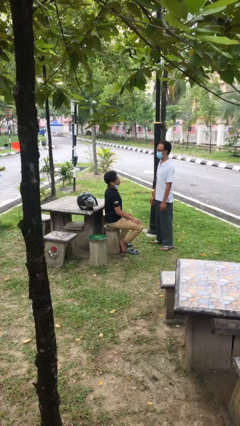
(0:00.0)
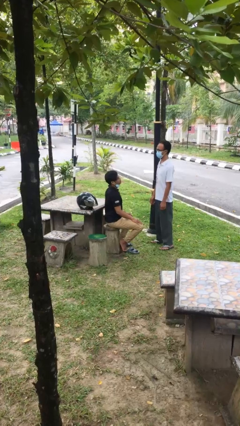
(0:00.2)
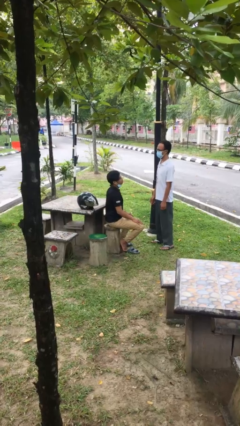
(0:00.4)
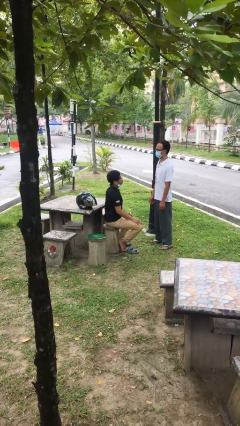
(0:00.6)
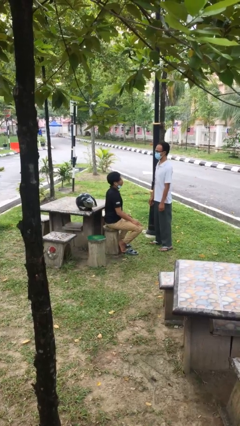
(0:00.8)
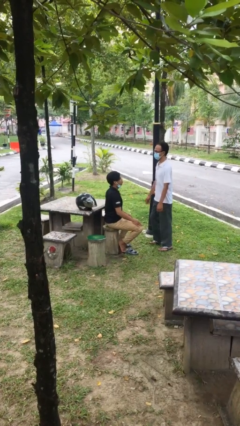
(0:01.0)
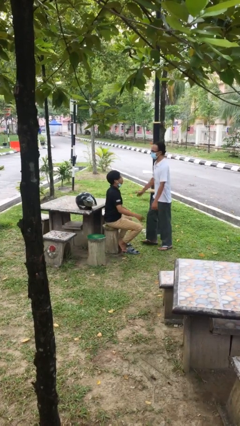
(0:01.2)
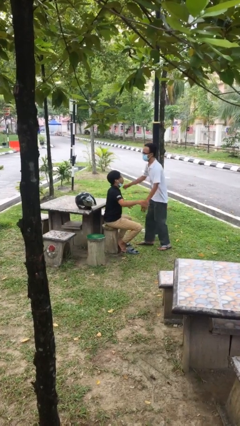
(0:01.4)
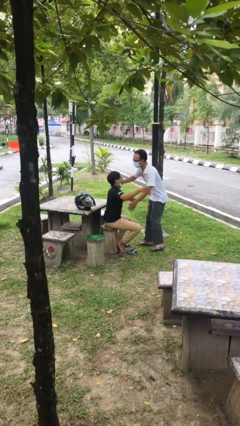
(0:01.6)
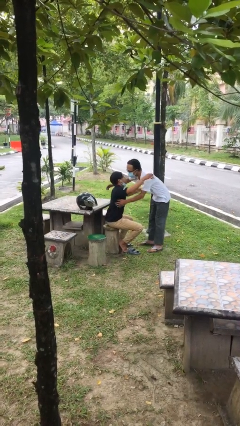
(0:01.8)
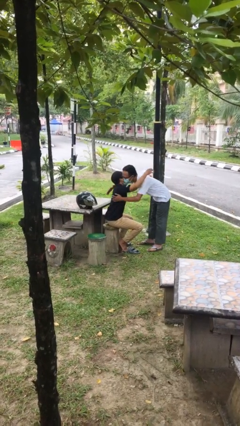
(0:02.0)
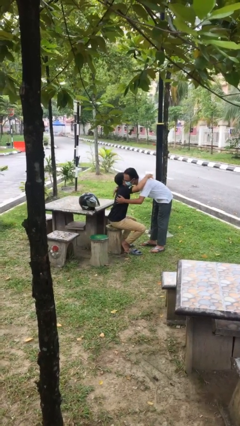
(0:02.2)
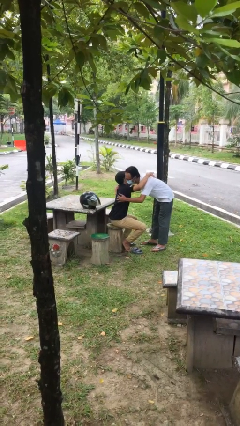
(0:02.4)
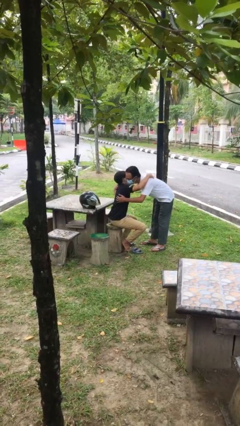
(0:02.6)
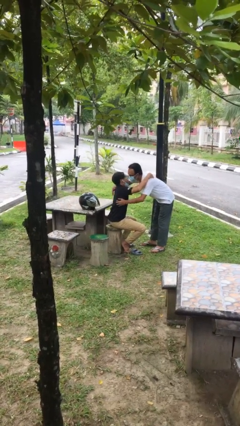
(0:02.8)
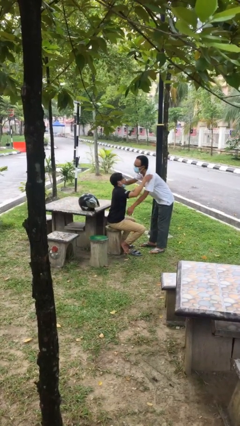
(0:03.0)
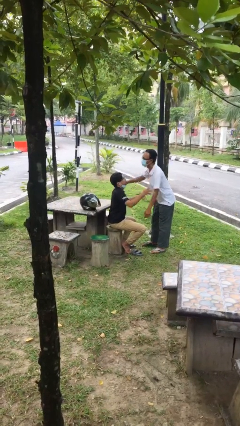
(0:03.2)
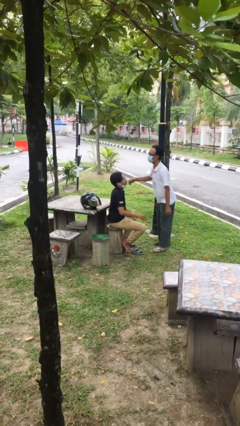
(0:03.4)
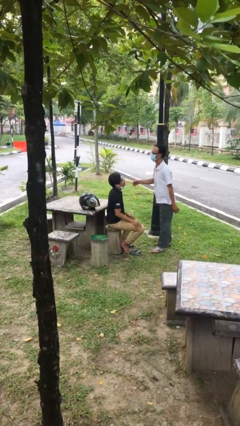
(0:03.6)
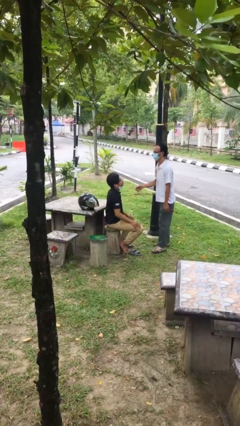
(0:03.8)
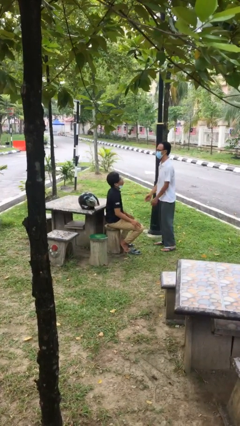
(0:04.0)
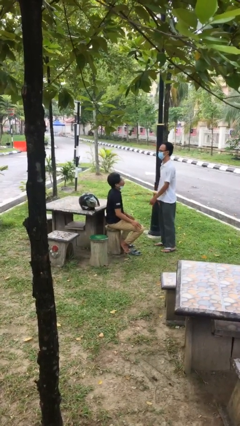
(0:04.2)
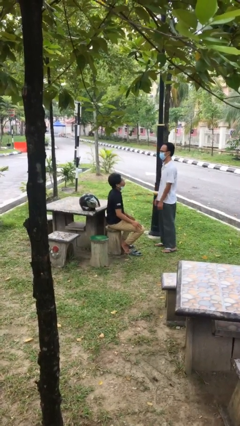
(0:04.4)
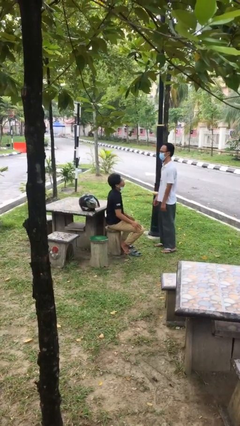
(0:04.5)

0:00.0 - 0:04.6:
person embraces person

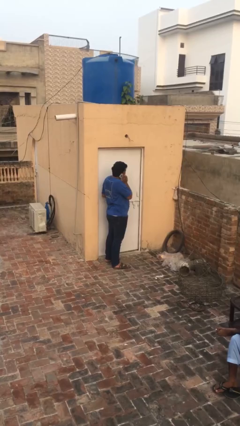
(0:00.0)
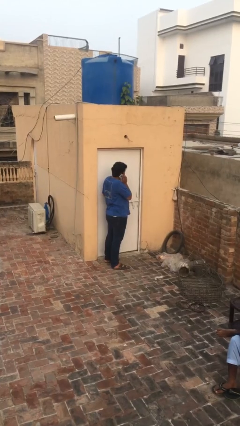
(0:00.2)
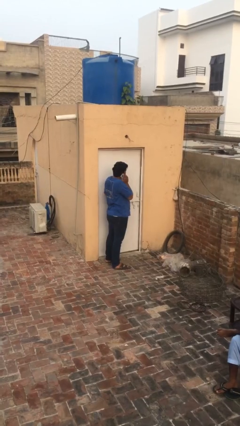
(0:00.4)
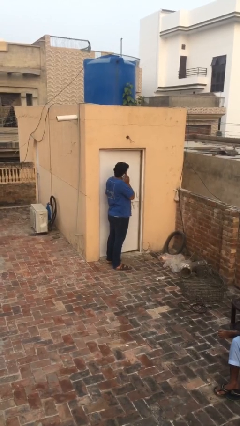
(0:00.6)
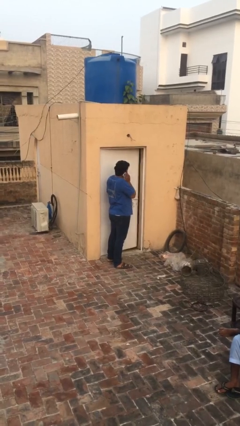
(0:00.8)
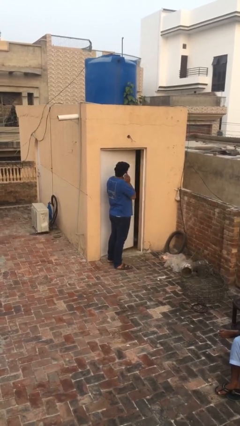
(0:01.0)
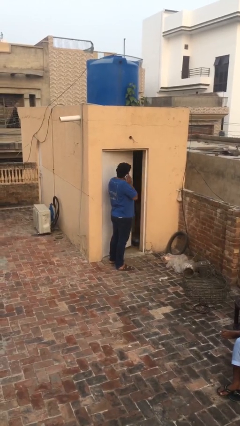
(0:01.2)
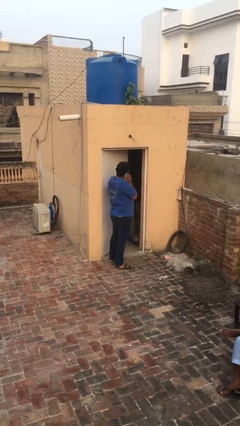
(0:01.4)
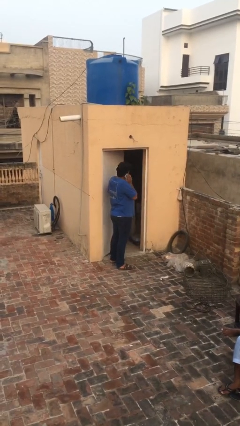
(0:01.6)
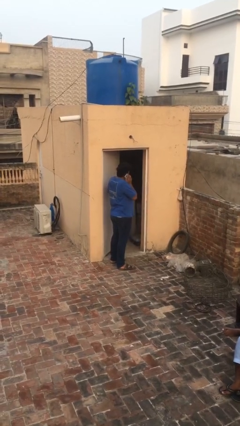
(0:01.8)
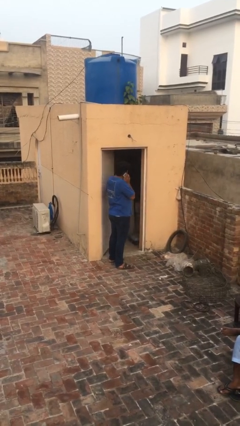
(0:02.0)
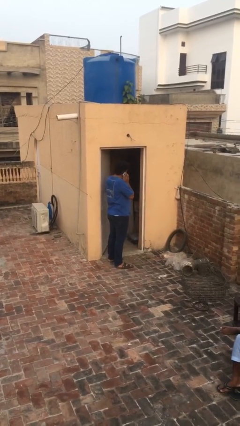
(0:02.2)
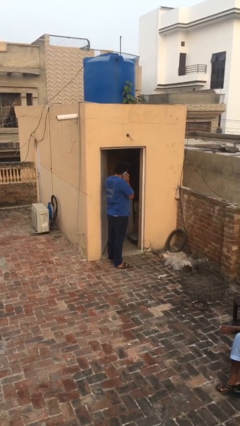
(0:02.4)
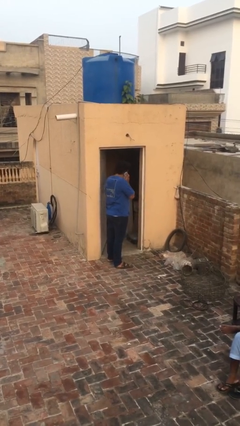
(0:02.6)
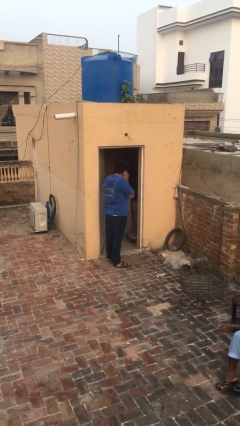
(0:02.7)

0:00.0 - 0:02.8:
person opens facility door

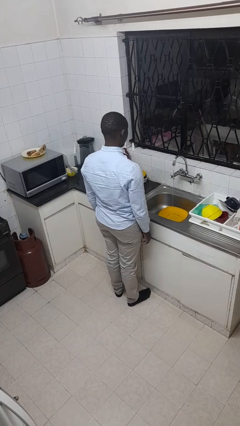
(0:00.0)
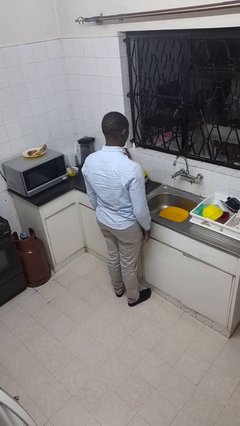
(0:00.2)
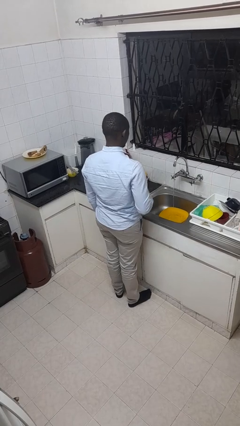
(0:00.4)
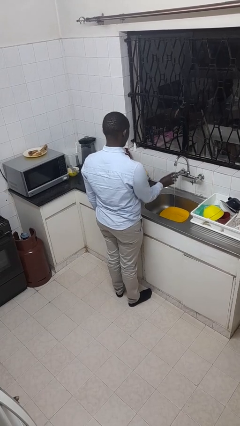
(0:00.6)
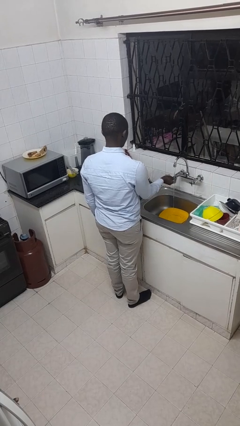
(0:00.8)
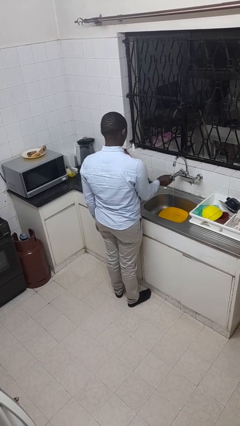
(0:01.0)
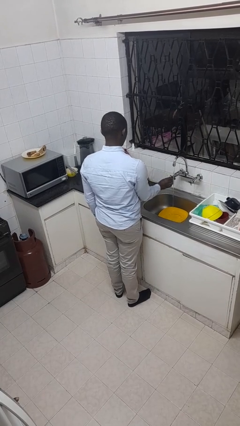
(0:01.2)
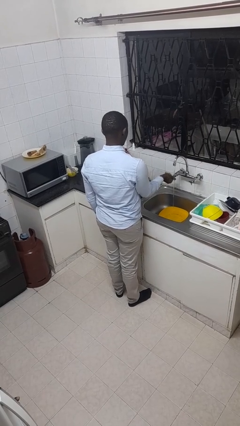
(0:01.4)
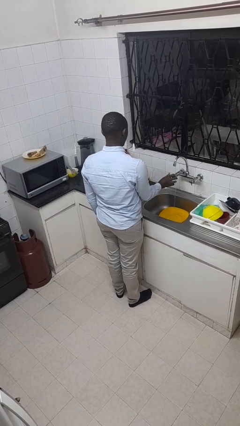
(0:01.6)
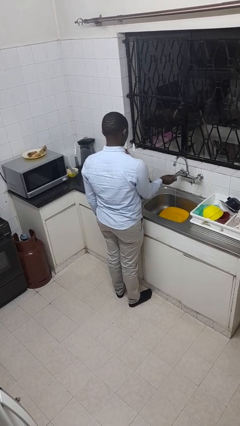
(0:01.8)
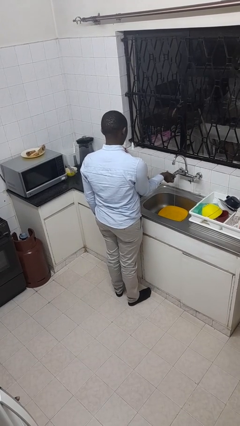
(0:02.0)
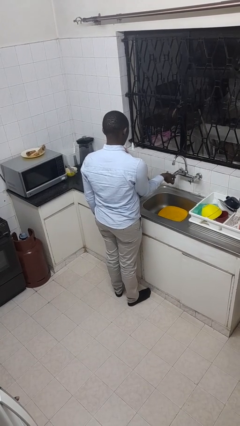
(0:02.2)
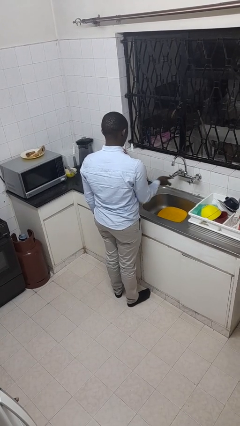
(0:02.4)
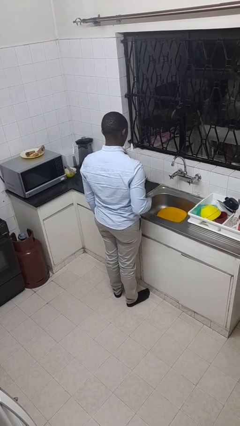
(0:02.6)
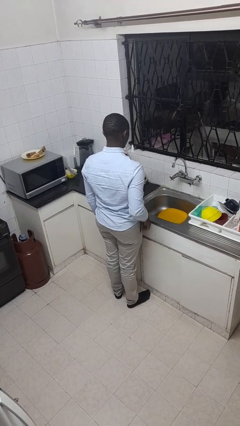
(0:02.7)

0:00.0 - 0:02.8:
person turns off faucet

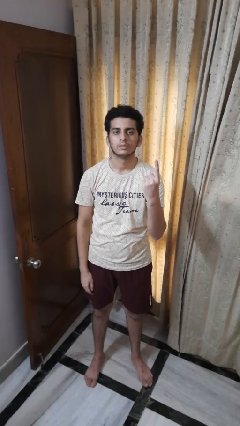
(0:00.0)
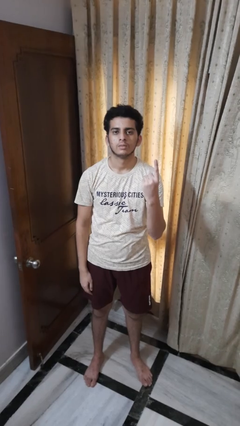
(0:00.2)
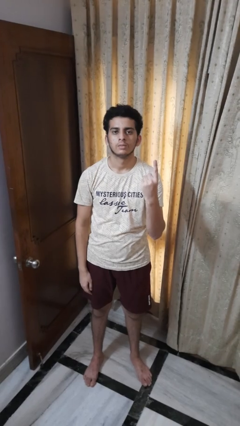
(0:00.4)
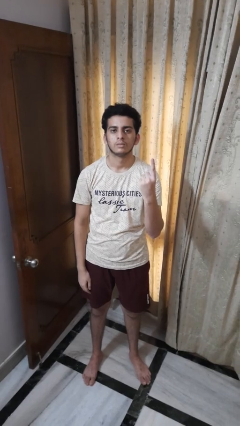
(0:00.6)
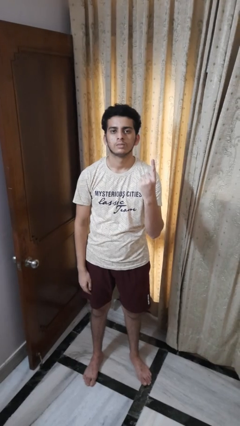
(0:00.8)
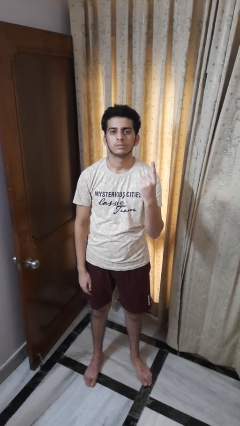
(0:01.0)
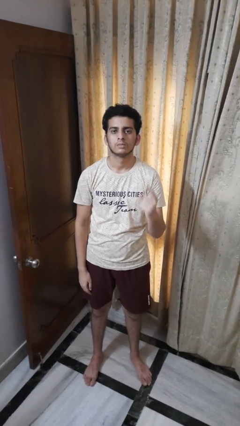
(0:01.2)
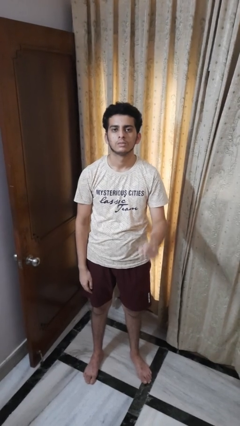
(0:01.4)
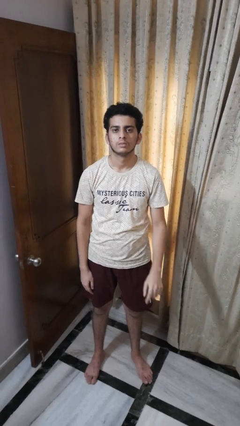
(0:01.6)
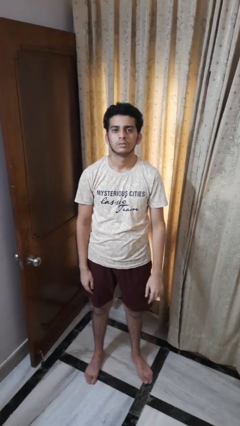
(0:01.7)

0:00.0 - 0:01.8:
person gestures number one

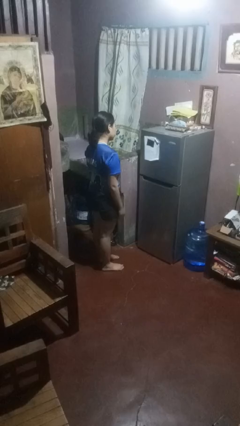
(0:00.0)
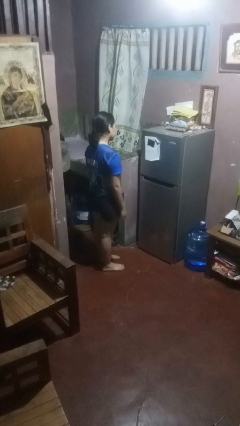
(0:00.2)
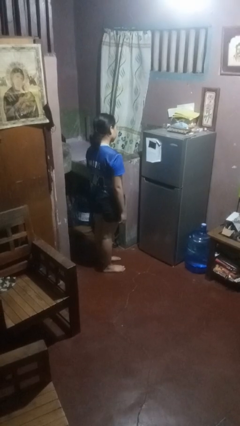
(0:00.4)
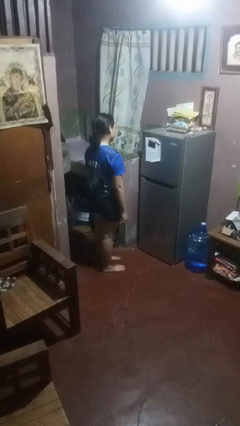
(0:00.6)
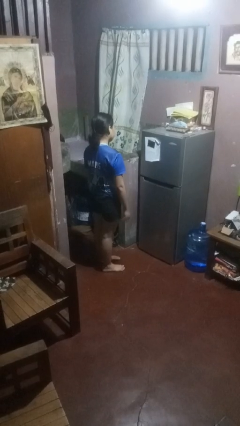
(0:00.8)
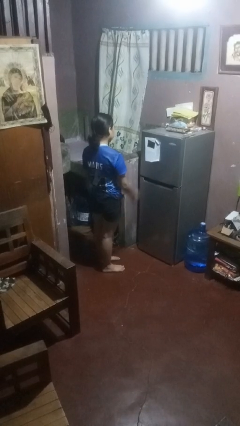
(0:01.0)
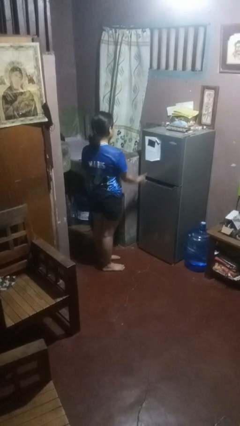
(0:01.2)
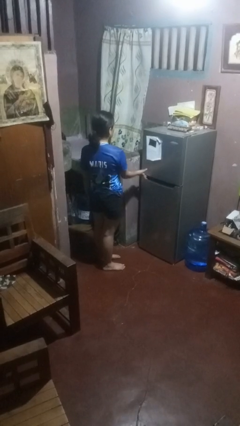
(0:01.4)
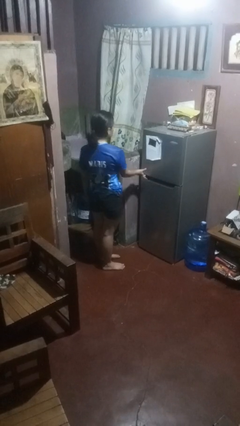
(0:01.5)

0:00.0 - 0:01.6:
person opens refrigerator

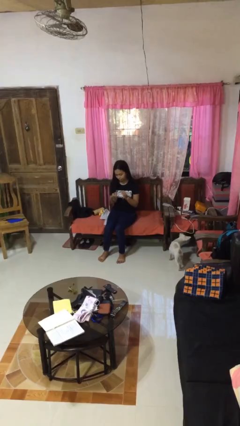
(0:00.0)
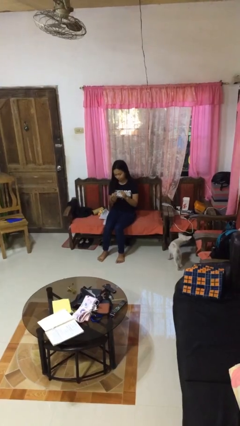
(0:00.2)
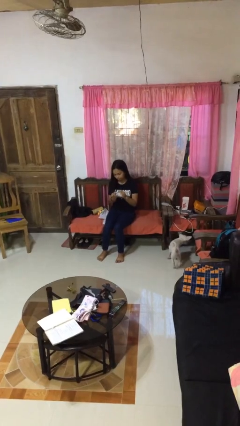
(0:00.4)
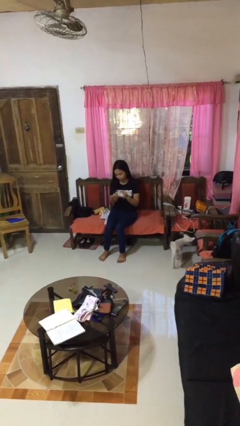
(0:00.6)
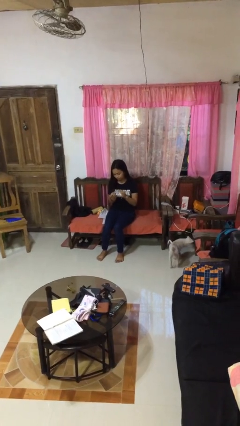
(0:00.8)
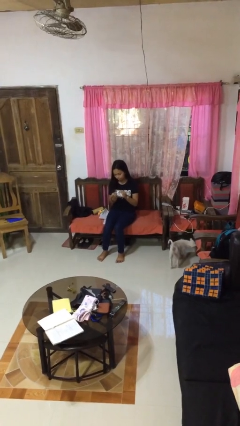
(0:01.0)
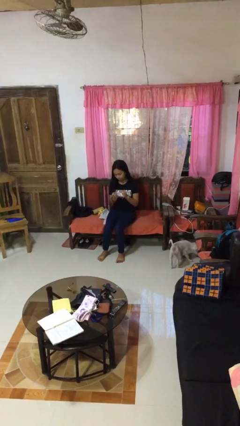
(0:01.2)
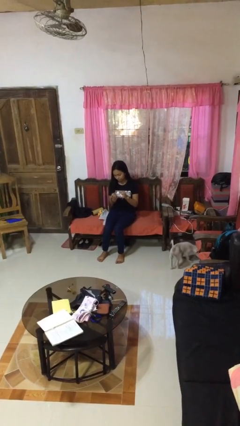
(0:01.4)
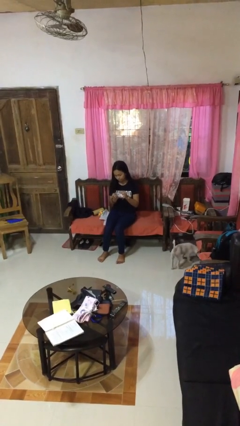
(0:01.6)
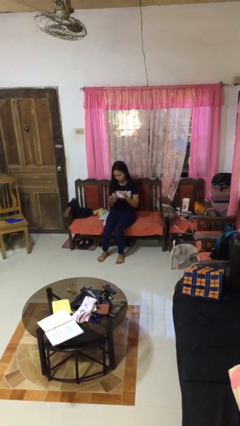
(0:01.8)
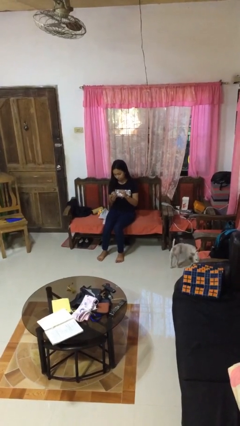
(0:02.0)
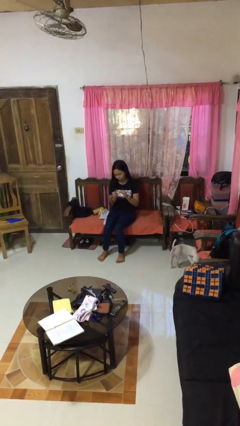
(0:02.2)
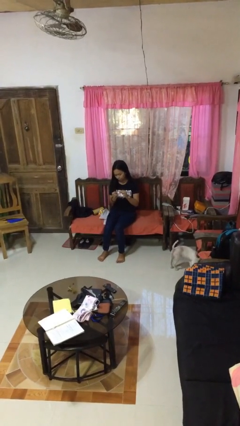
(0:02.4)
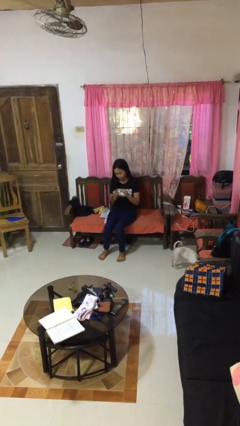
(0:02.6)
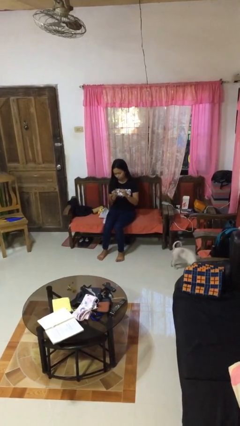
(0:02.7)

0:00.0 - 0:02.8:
person clips fingernails

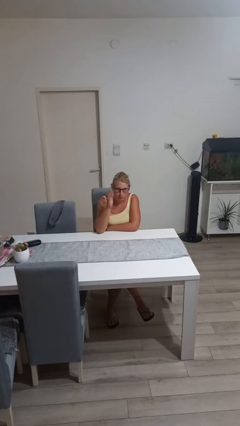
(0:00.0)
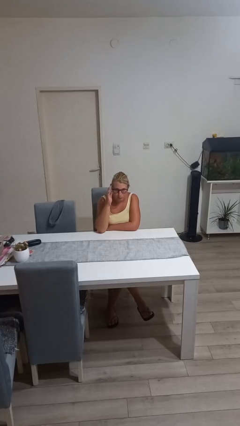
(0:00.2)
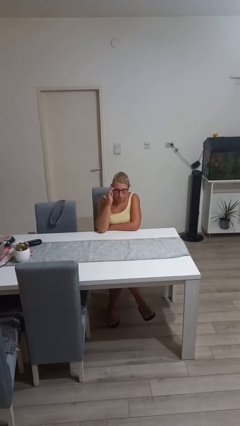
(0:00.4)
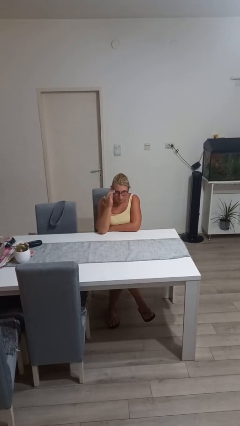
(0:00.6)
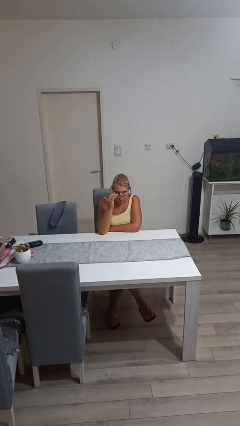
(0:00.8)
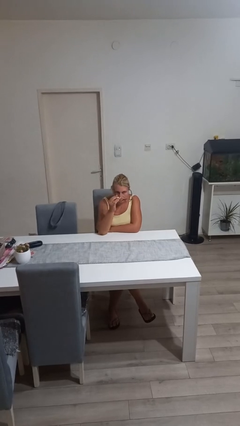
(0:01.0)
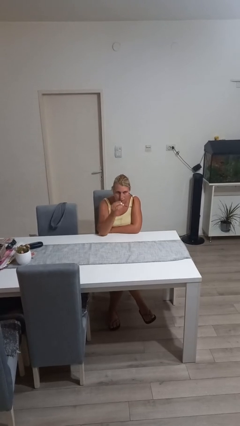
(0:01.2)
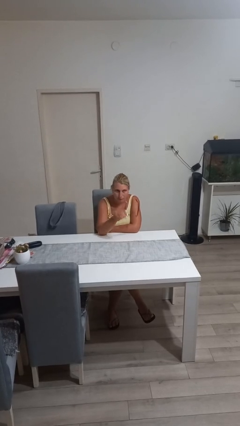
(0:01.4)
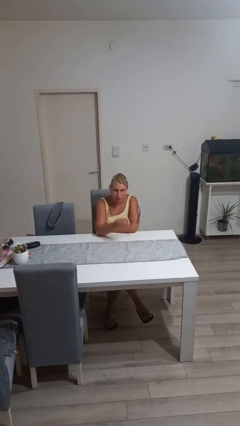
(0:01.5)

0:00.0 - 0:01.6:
person takes off glasses
